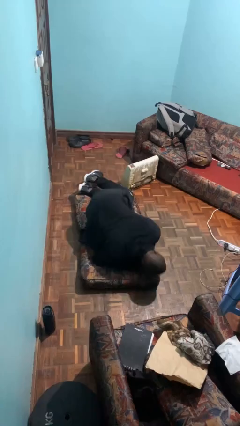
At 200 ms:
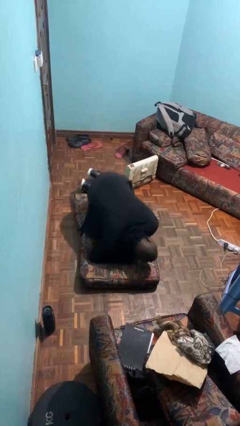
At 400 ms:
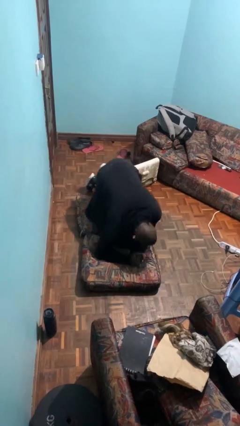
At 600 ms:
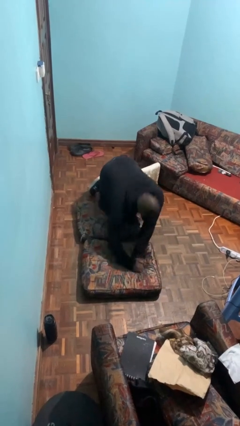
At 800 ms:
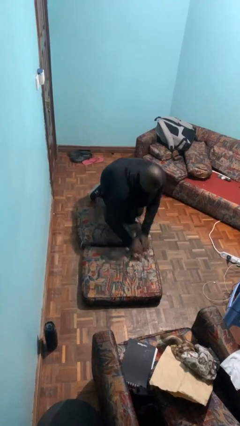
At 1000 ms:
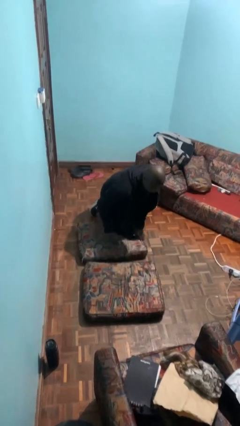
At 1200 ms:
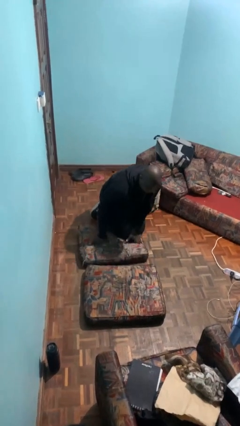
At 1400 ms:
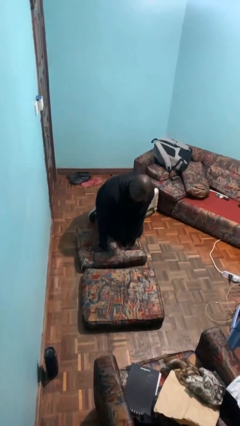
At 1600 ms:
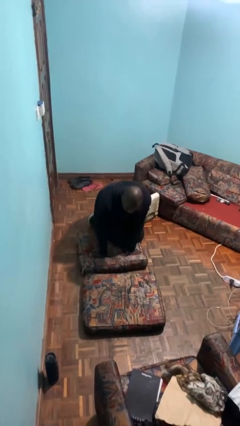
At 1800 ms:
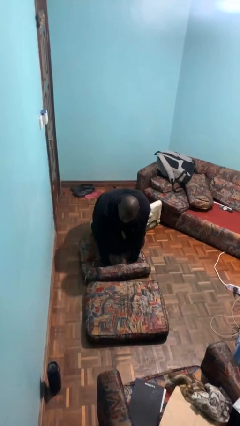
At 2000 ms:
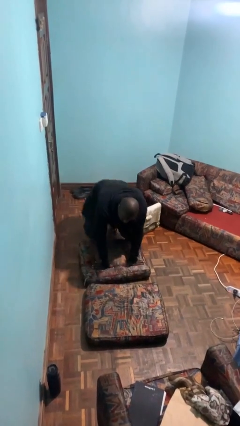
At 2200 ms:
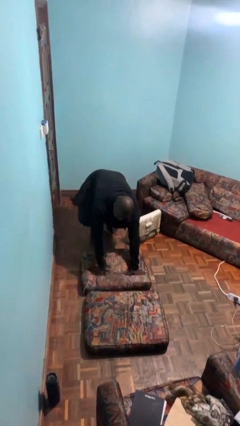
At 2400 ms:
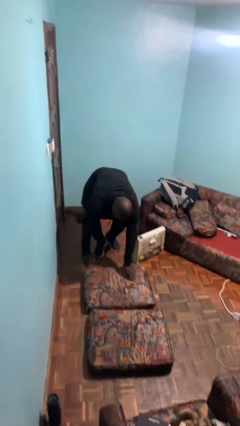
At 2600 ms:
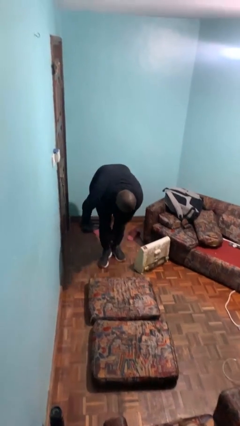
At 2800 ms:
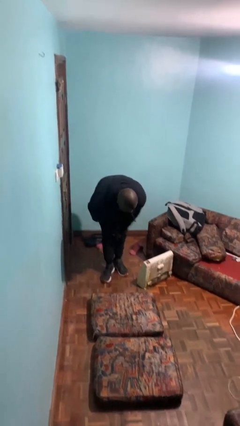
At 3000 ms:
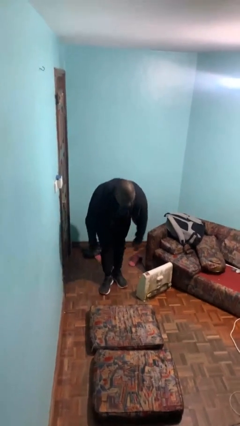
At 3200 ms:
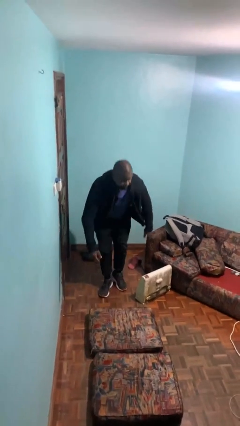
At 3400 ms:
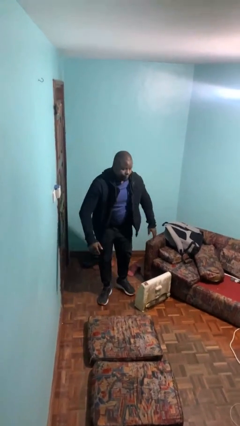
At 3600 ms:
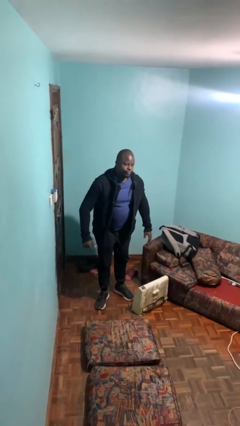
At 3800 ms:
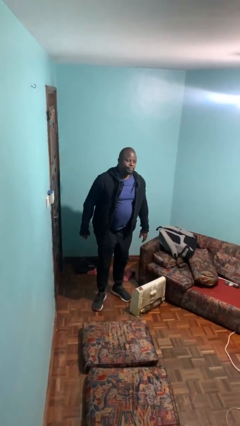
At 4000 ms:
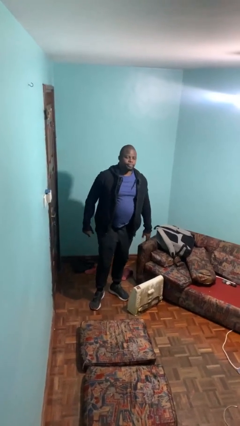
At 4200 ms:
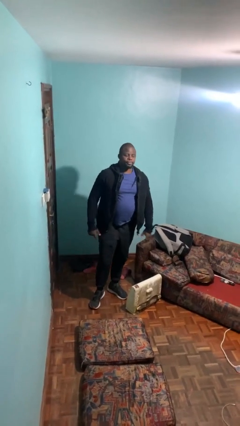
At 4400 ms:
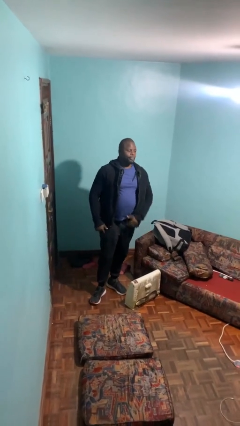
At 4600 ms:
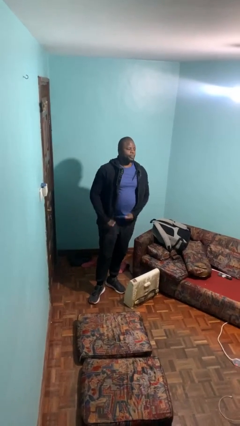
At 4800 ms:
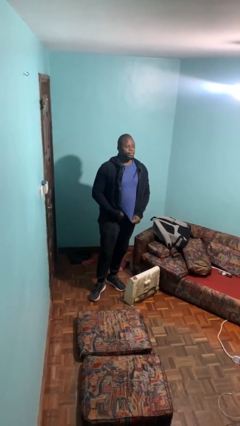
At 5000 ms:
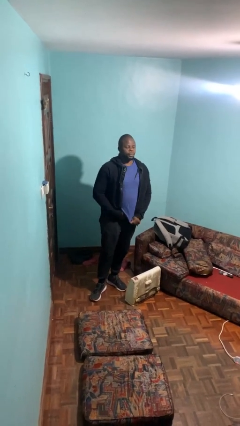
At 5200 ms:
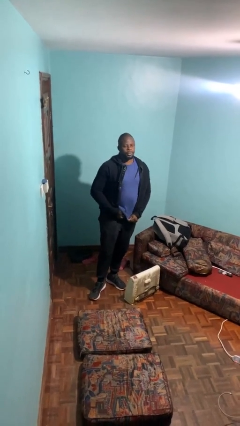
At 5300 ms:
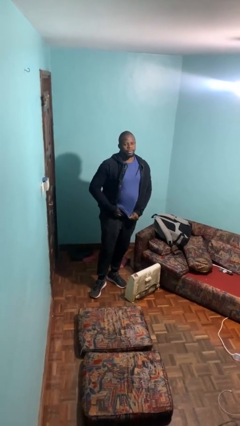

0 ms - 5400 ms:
person stands up from floor

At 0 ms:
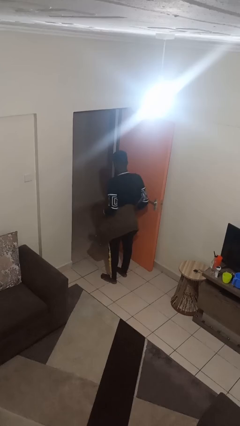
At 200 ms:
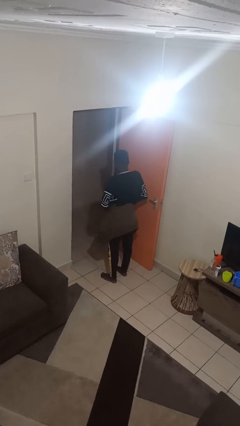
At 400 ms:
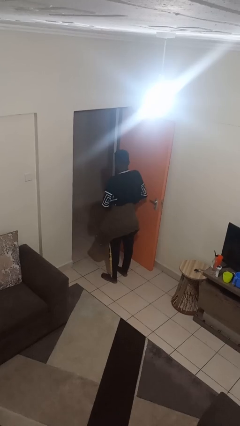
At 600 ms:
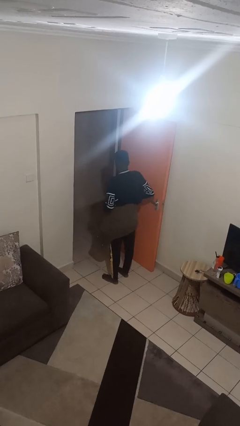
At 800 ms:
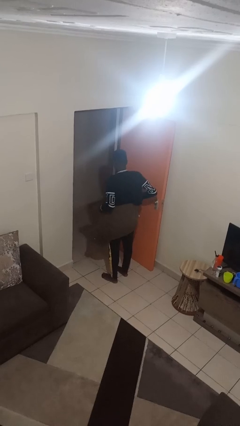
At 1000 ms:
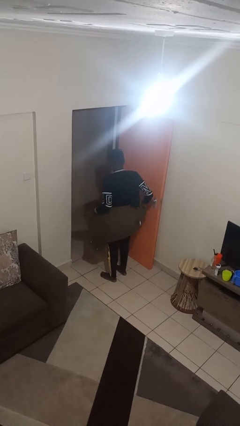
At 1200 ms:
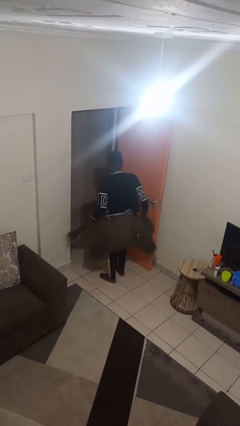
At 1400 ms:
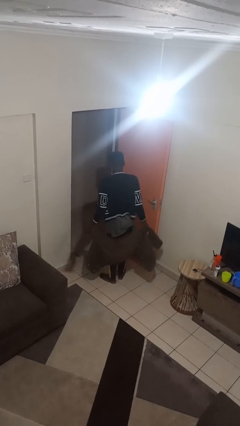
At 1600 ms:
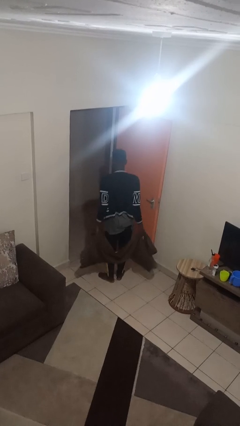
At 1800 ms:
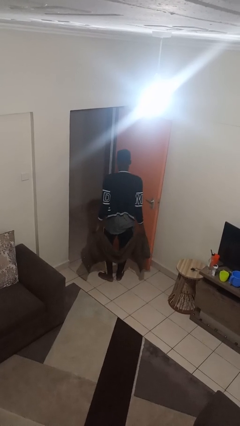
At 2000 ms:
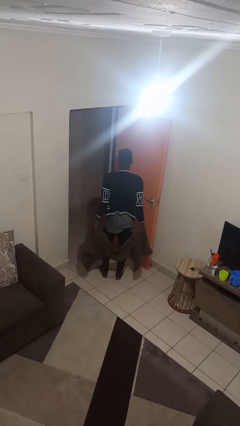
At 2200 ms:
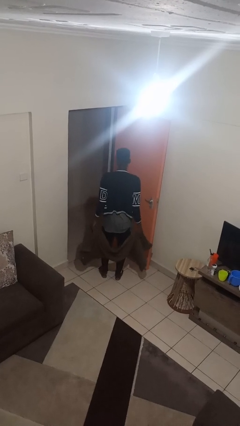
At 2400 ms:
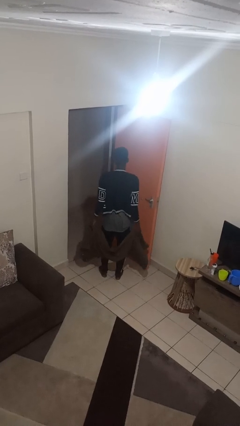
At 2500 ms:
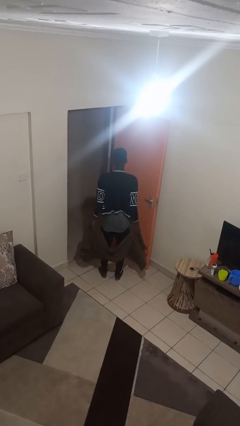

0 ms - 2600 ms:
person unties jacket around waist

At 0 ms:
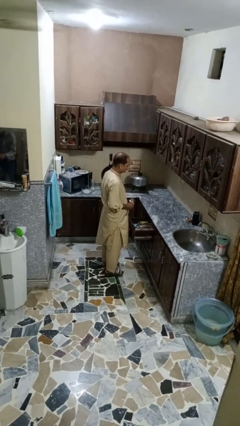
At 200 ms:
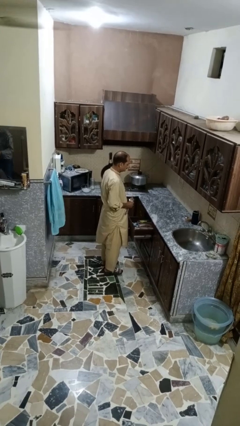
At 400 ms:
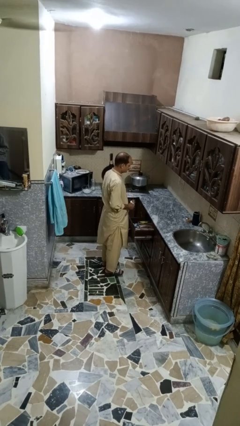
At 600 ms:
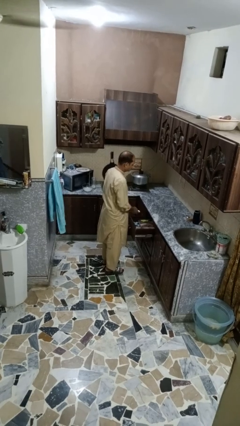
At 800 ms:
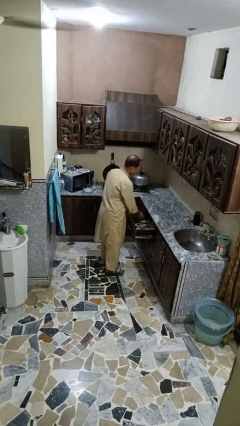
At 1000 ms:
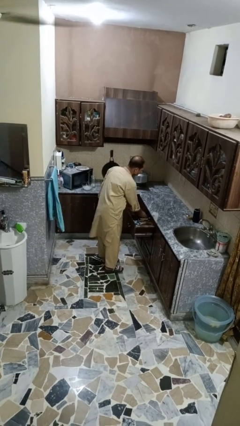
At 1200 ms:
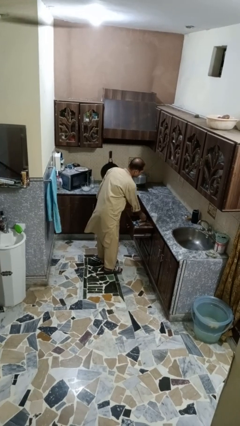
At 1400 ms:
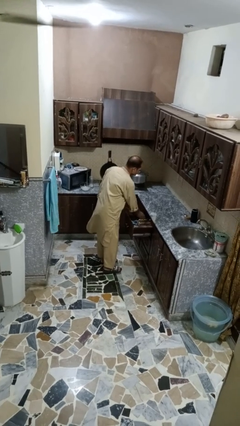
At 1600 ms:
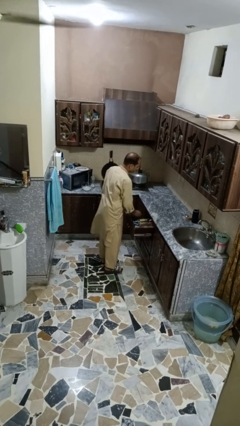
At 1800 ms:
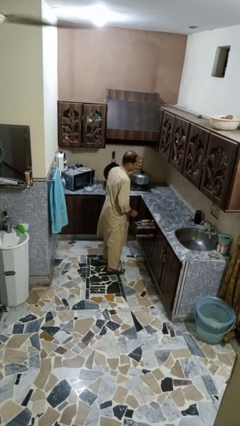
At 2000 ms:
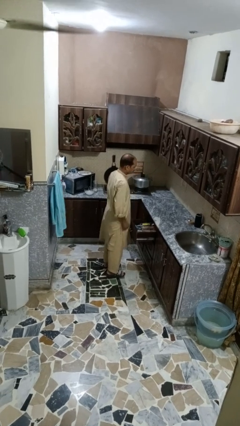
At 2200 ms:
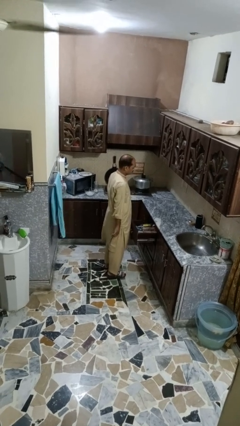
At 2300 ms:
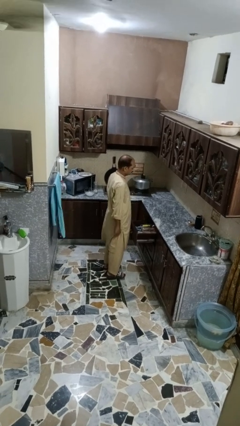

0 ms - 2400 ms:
person puts object into kitchen drawer

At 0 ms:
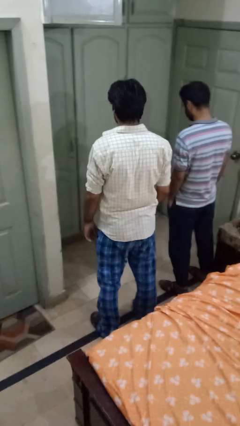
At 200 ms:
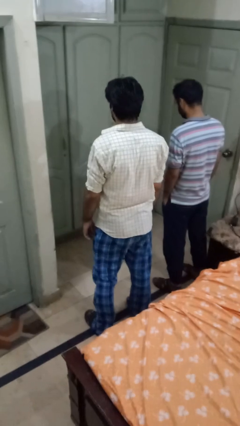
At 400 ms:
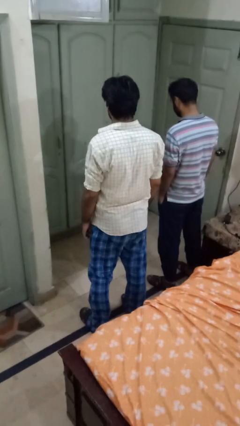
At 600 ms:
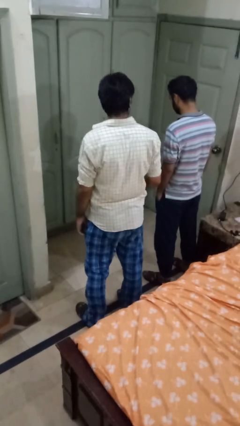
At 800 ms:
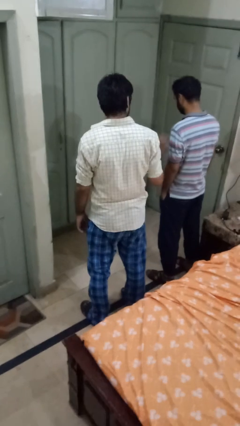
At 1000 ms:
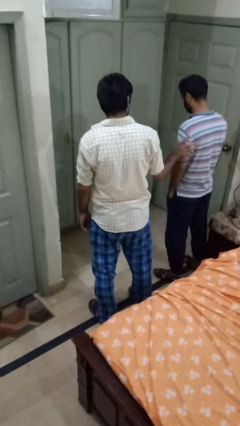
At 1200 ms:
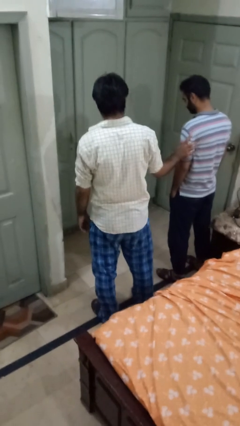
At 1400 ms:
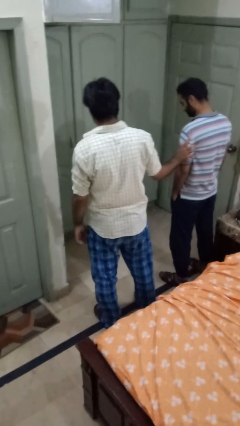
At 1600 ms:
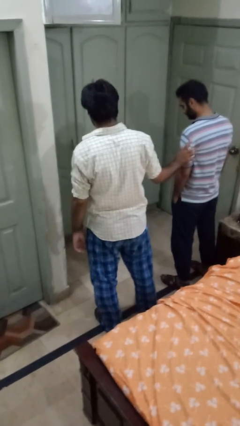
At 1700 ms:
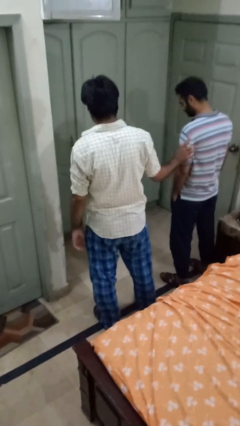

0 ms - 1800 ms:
person grabs person by bicep

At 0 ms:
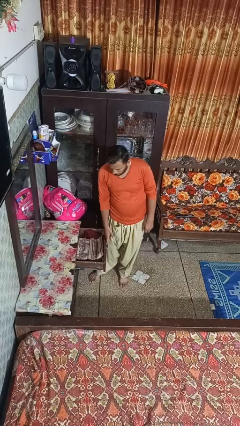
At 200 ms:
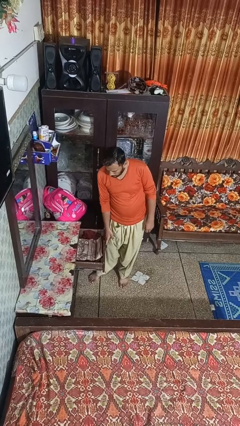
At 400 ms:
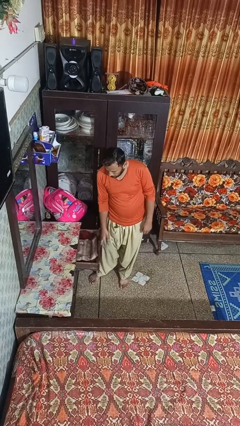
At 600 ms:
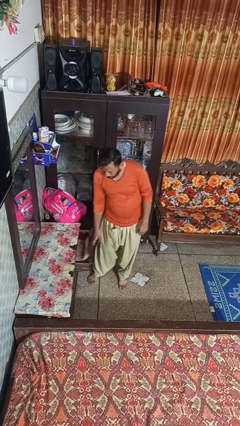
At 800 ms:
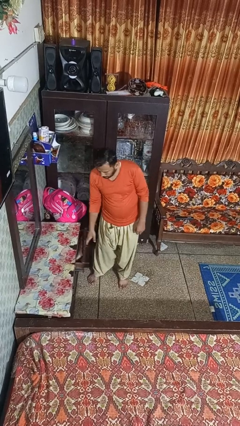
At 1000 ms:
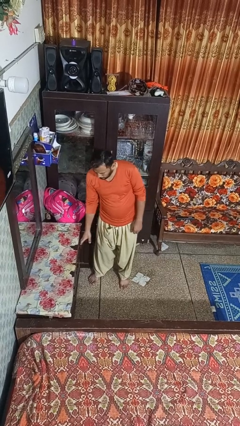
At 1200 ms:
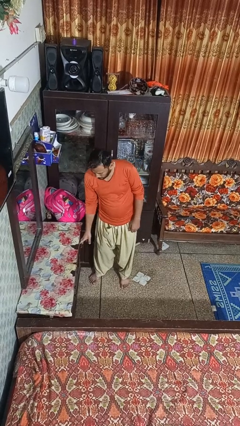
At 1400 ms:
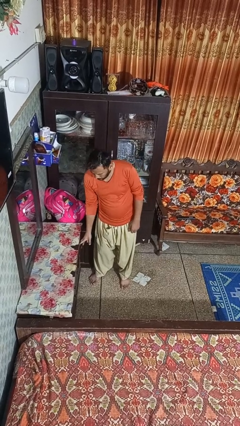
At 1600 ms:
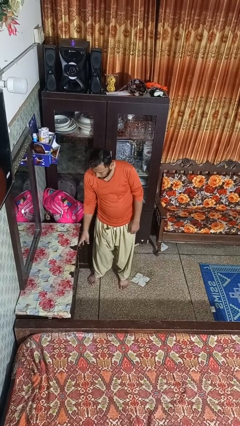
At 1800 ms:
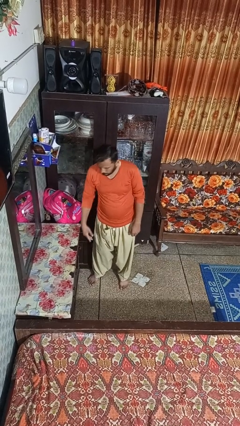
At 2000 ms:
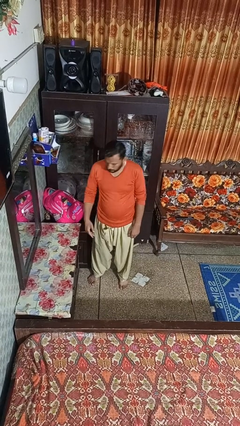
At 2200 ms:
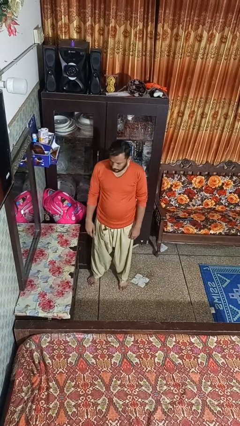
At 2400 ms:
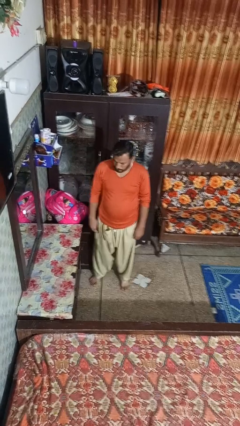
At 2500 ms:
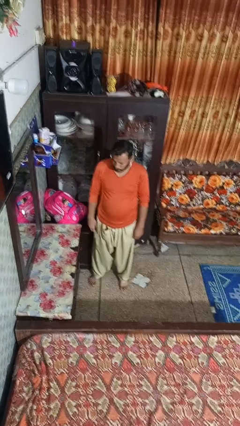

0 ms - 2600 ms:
person closes dresser drawer

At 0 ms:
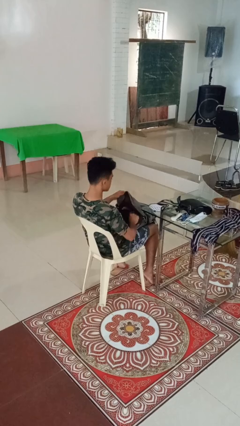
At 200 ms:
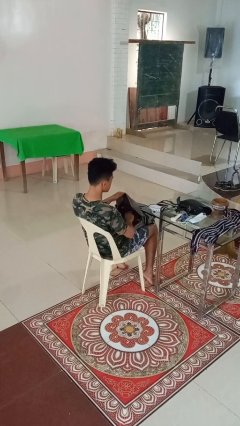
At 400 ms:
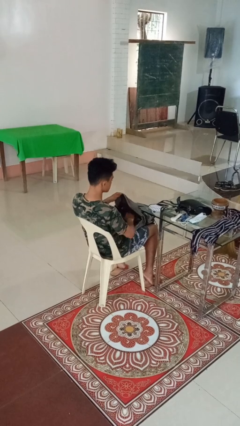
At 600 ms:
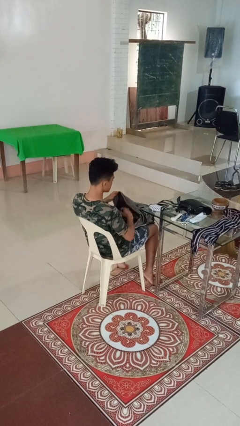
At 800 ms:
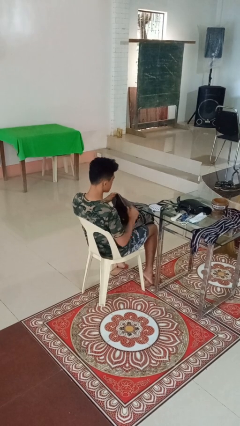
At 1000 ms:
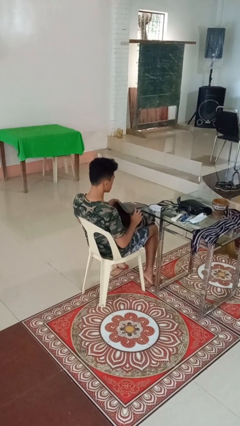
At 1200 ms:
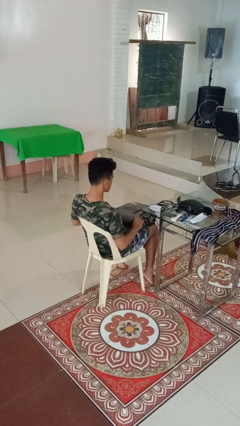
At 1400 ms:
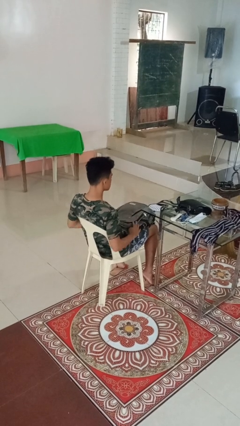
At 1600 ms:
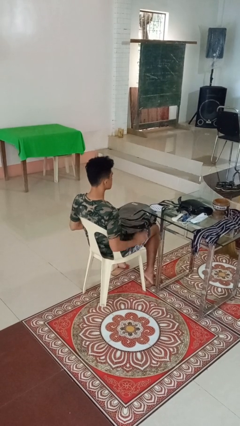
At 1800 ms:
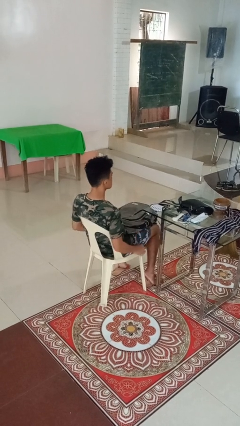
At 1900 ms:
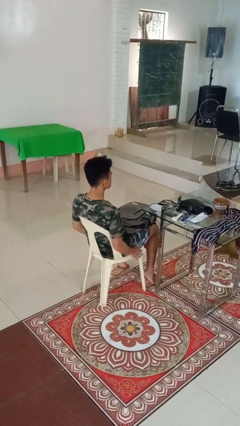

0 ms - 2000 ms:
person puts object into backpack

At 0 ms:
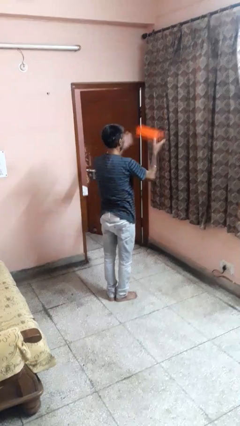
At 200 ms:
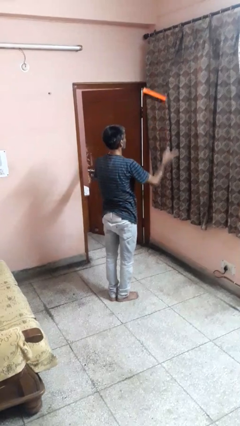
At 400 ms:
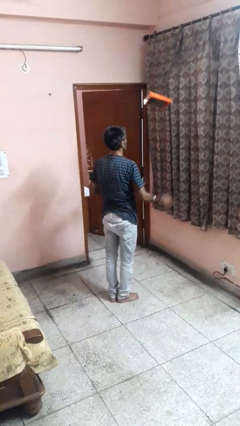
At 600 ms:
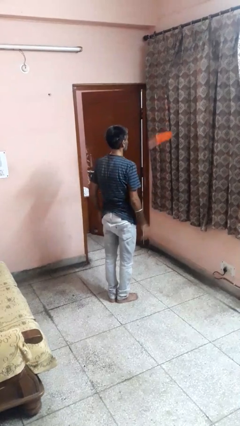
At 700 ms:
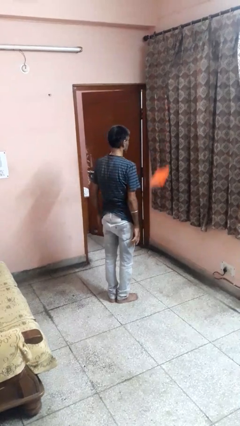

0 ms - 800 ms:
person throws object into air
